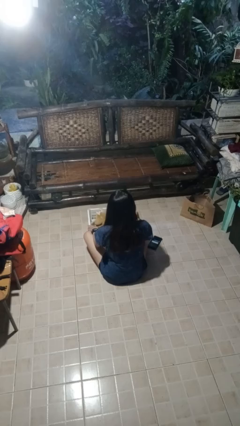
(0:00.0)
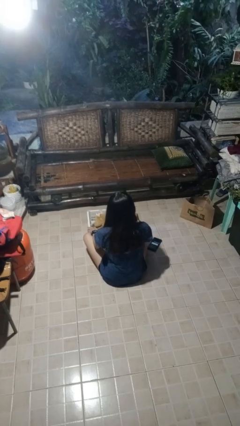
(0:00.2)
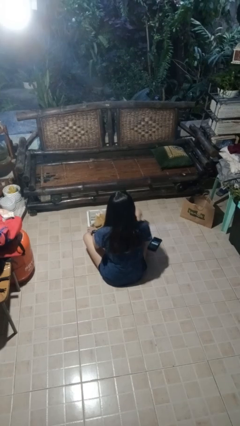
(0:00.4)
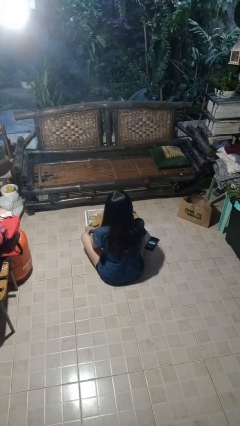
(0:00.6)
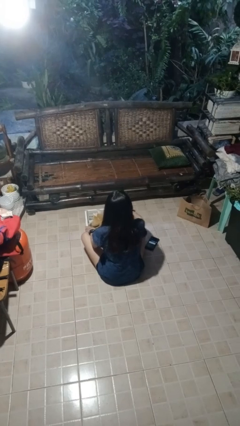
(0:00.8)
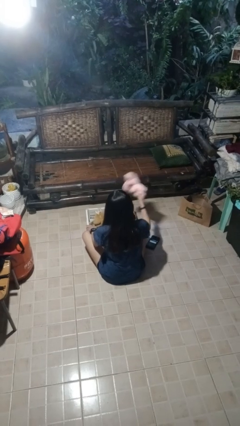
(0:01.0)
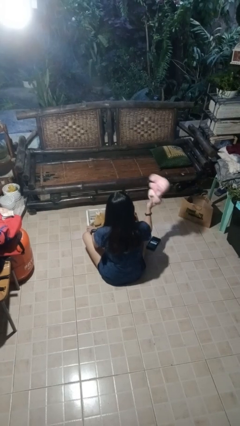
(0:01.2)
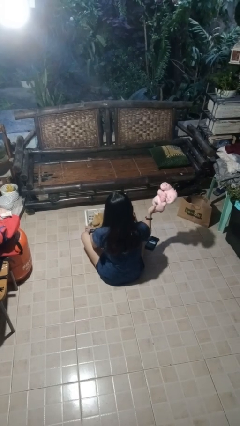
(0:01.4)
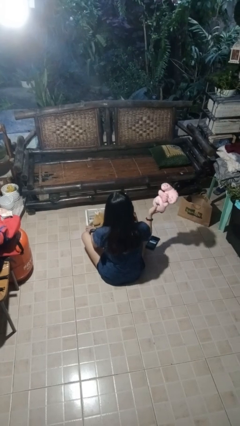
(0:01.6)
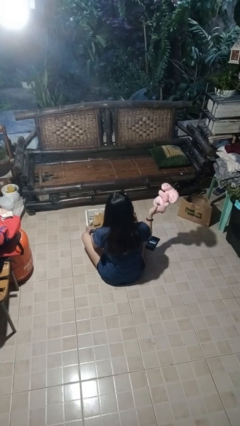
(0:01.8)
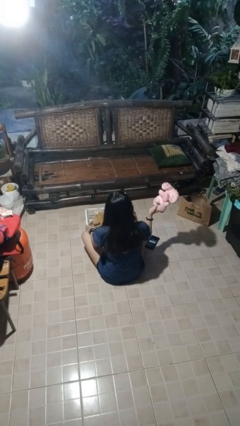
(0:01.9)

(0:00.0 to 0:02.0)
person takes object from basket

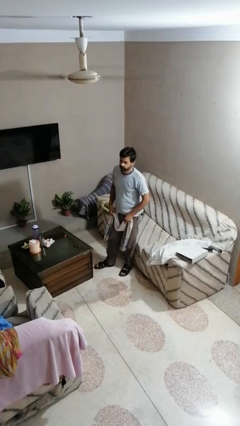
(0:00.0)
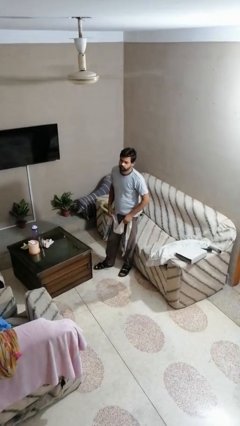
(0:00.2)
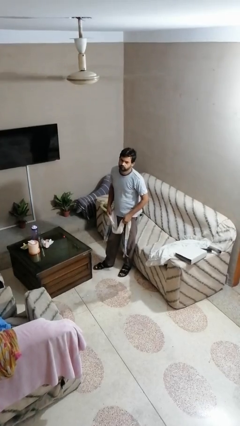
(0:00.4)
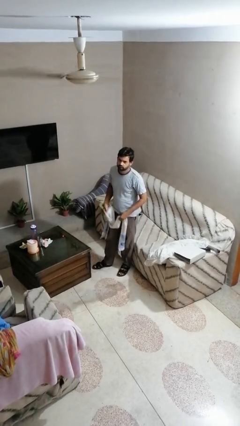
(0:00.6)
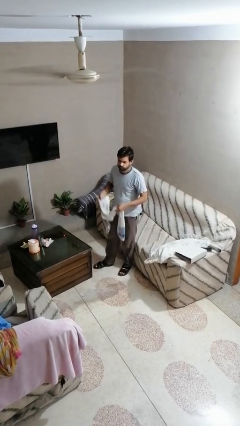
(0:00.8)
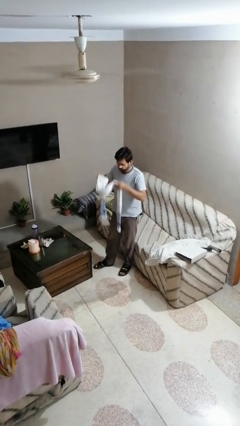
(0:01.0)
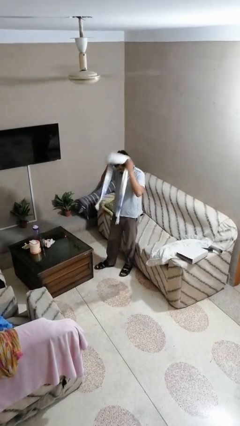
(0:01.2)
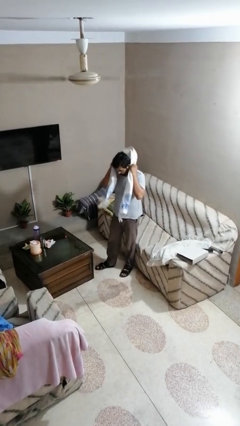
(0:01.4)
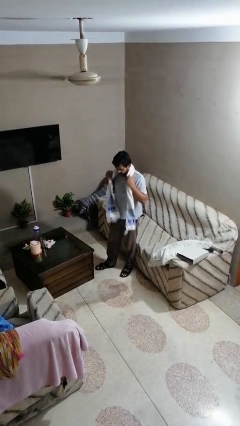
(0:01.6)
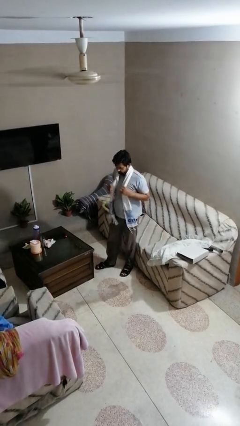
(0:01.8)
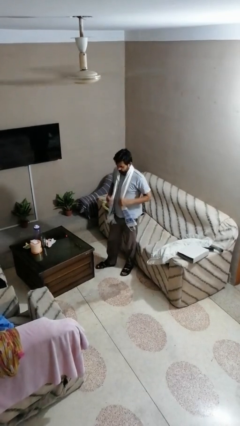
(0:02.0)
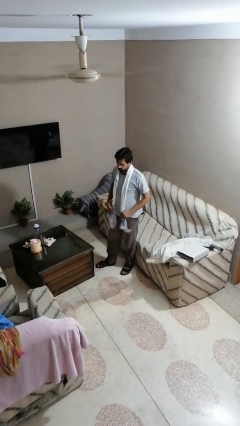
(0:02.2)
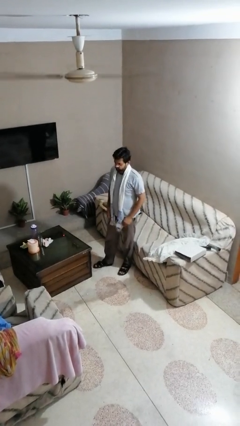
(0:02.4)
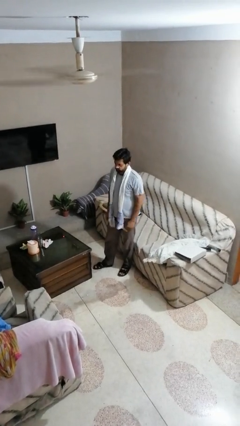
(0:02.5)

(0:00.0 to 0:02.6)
person puts on scarf

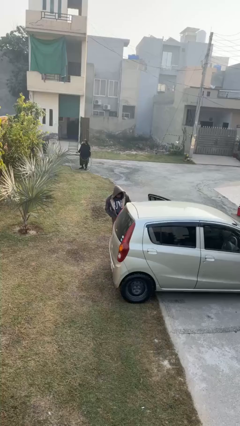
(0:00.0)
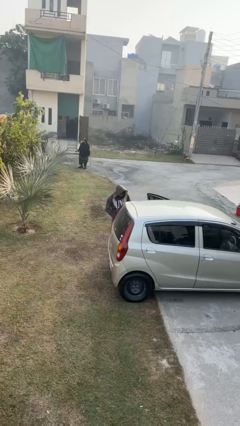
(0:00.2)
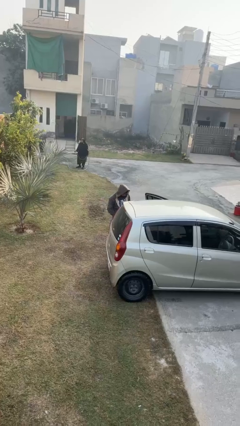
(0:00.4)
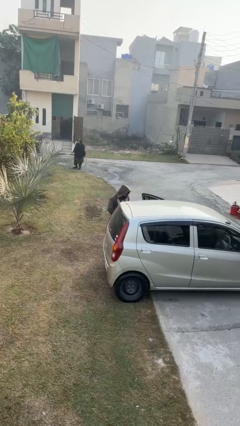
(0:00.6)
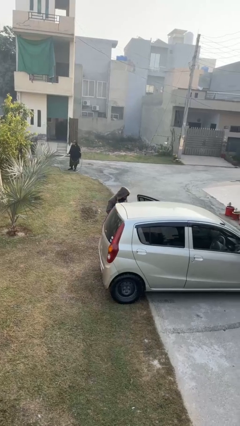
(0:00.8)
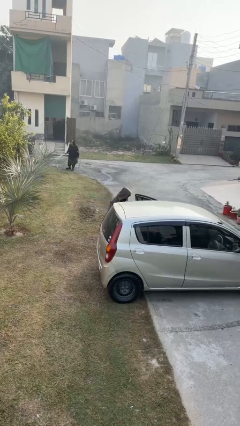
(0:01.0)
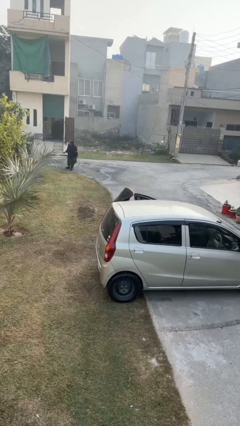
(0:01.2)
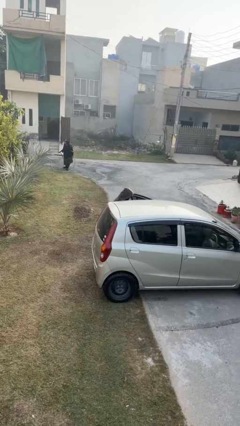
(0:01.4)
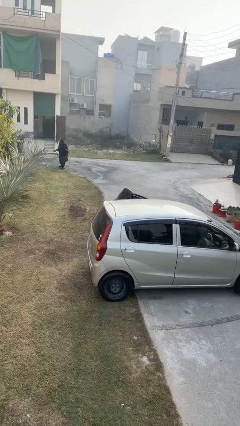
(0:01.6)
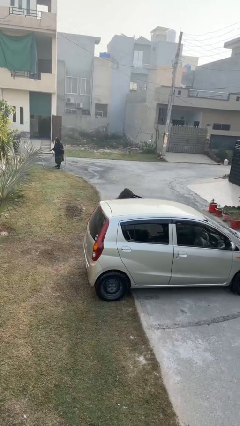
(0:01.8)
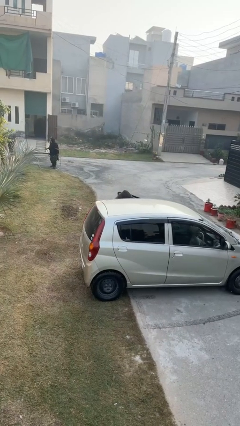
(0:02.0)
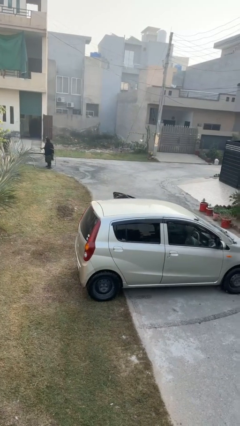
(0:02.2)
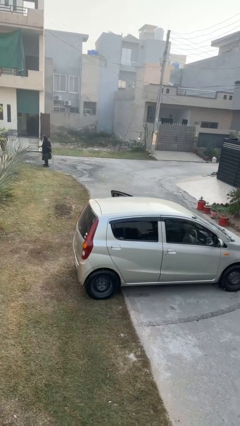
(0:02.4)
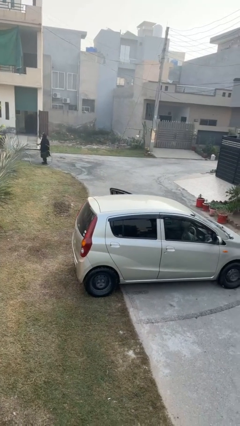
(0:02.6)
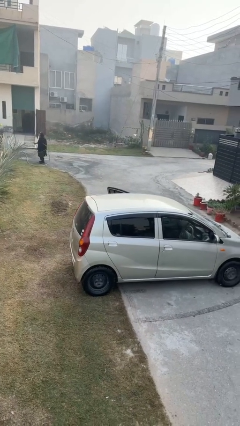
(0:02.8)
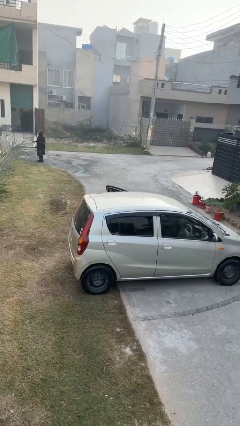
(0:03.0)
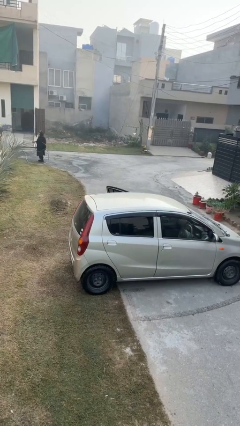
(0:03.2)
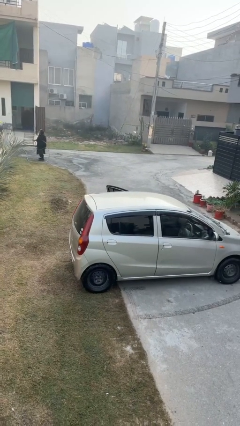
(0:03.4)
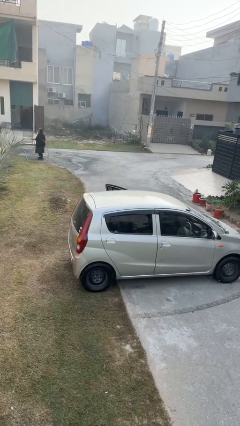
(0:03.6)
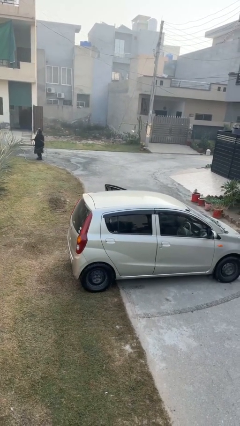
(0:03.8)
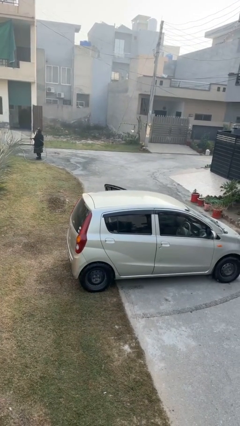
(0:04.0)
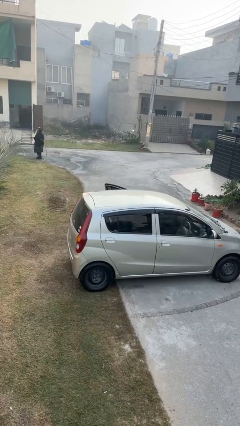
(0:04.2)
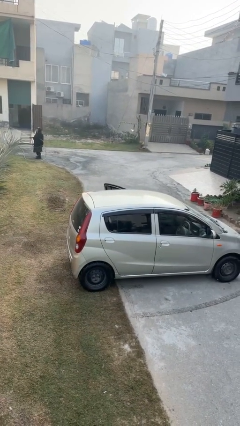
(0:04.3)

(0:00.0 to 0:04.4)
person enters car

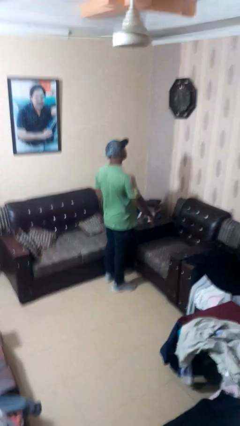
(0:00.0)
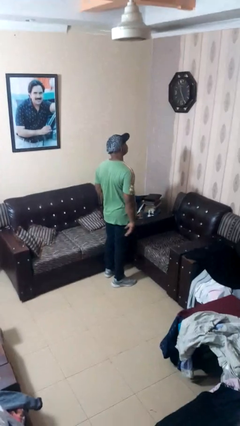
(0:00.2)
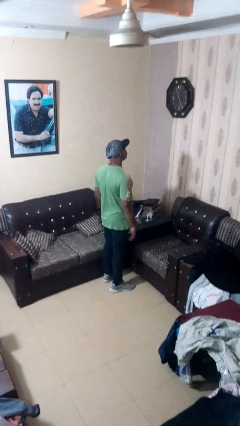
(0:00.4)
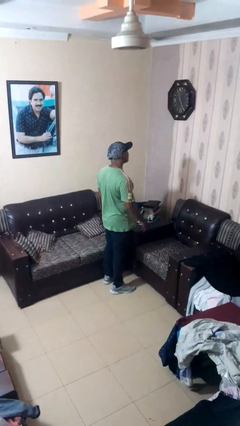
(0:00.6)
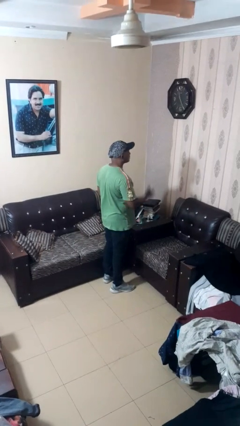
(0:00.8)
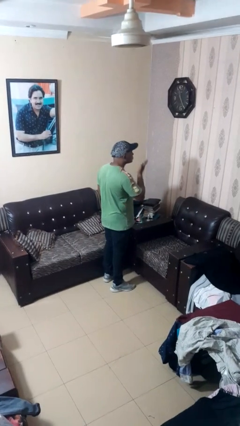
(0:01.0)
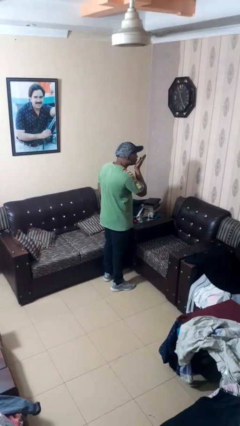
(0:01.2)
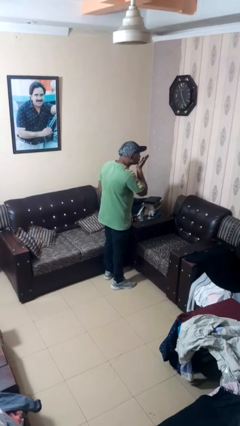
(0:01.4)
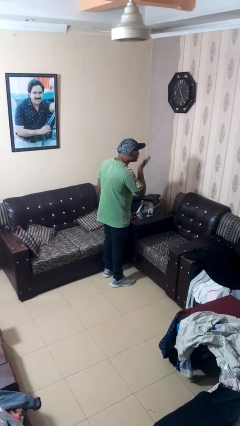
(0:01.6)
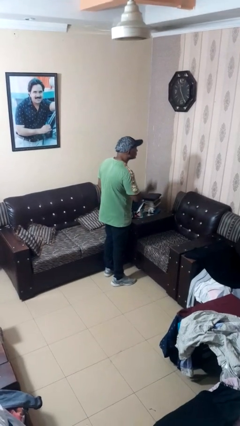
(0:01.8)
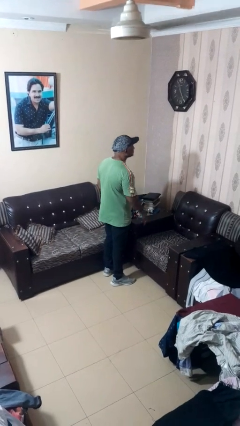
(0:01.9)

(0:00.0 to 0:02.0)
person gestures blow kiss

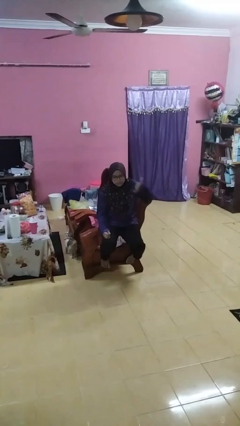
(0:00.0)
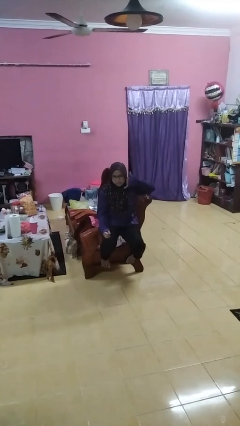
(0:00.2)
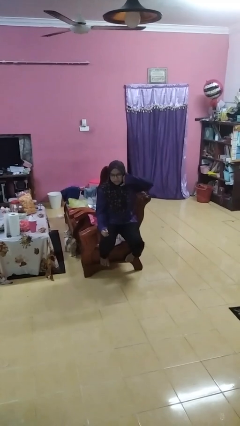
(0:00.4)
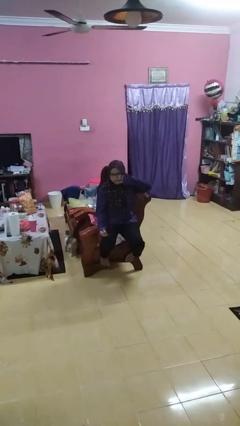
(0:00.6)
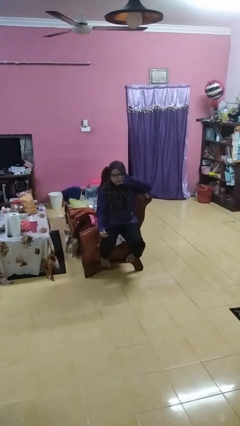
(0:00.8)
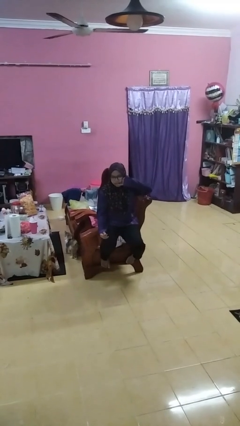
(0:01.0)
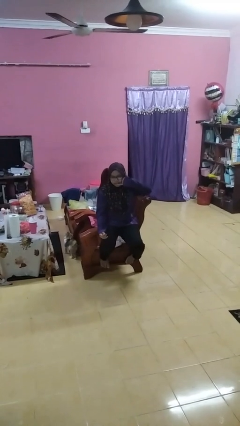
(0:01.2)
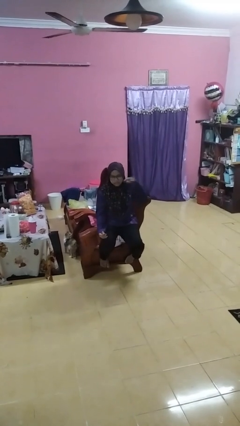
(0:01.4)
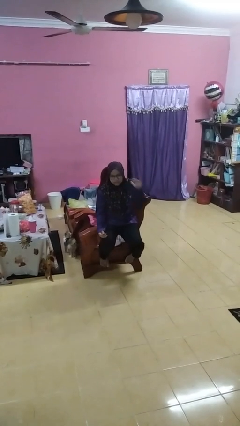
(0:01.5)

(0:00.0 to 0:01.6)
person gestures call me

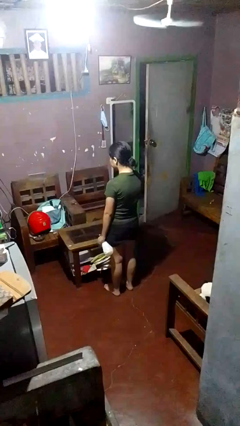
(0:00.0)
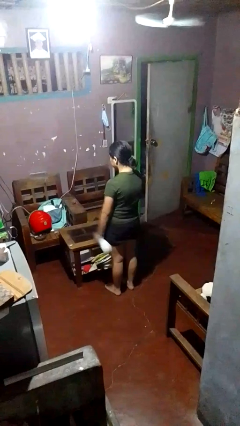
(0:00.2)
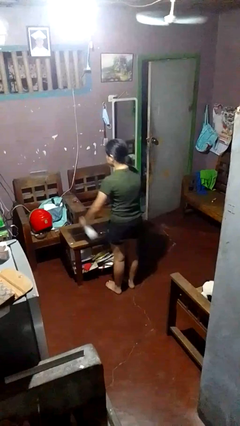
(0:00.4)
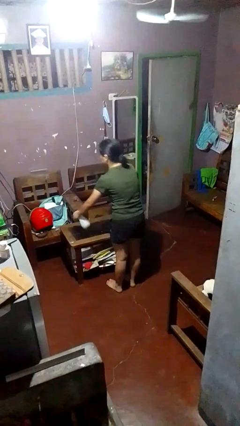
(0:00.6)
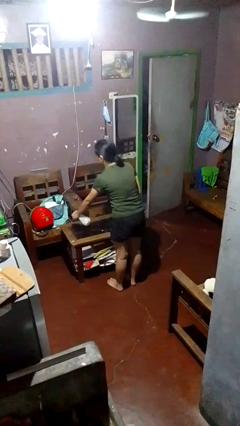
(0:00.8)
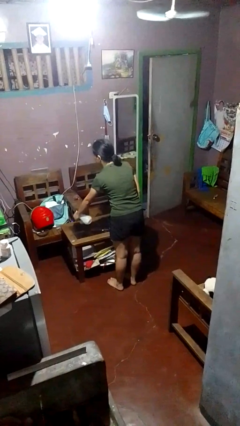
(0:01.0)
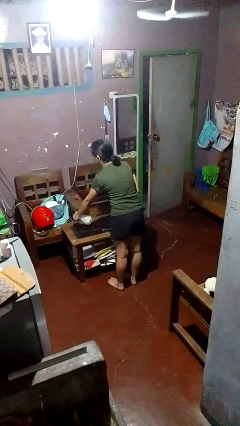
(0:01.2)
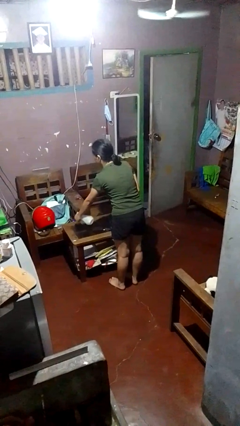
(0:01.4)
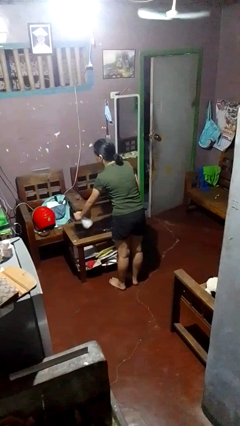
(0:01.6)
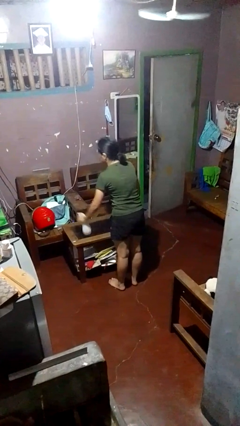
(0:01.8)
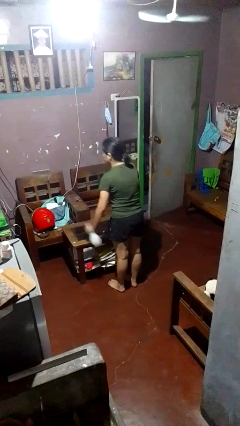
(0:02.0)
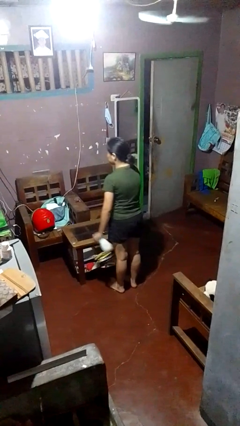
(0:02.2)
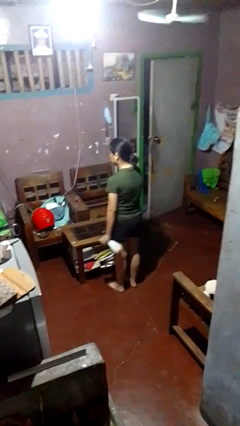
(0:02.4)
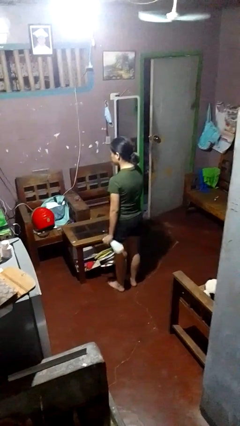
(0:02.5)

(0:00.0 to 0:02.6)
person sprays from bottle

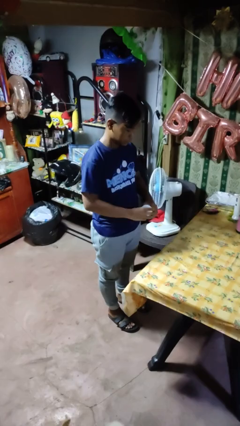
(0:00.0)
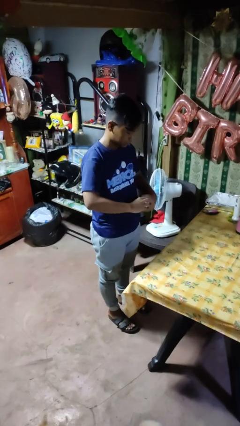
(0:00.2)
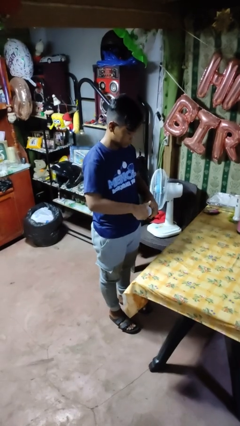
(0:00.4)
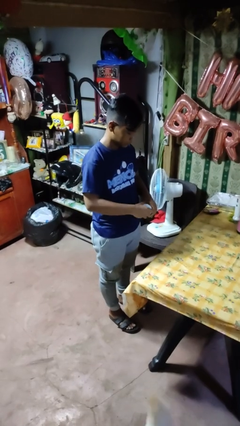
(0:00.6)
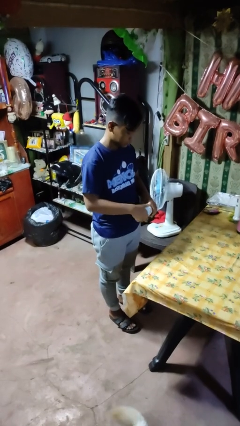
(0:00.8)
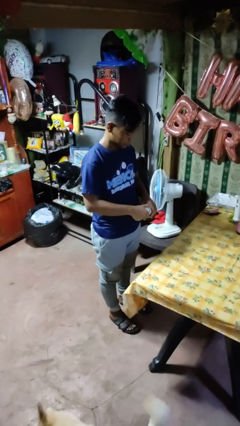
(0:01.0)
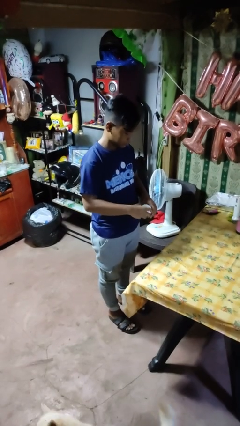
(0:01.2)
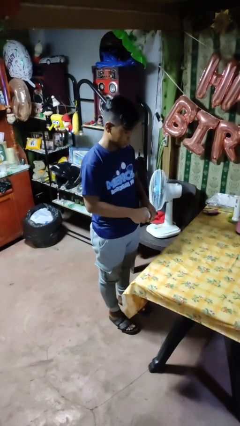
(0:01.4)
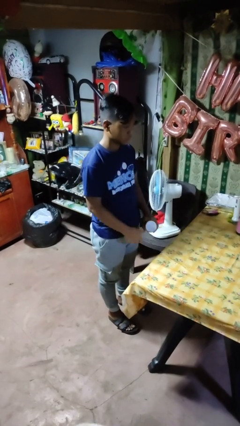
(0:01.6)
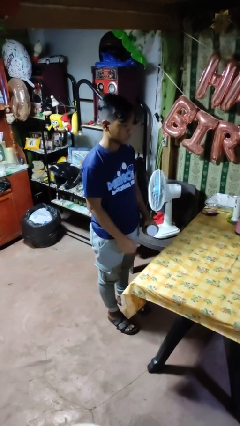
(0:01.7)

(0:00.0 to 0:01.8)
person closes jar
